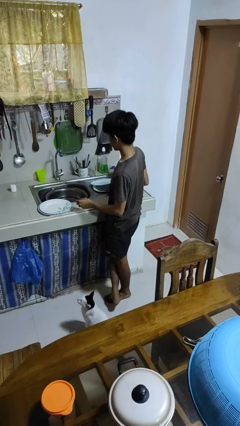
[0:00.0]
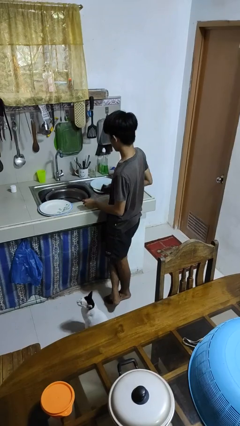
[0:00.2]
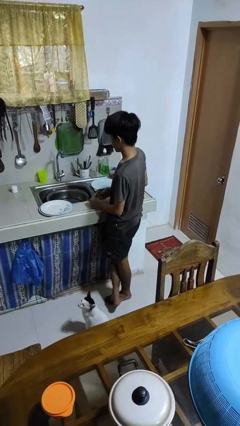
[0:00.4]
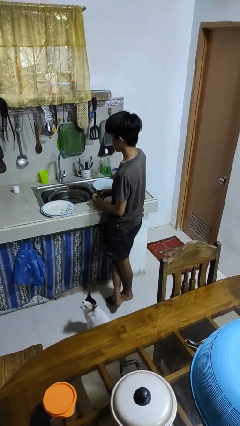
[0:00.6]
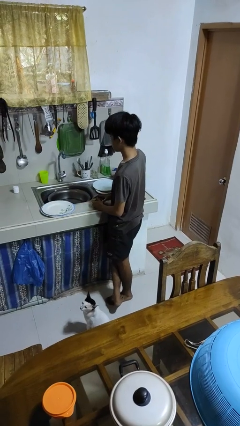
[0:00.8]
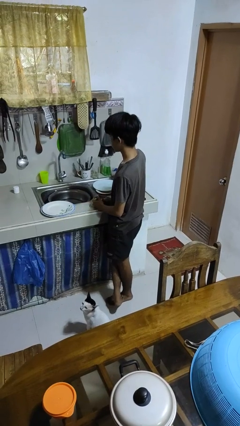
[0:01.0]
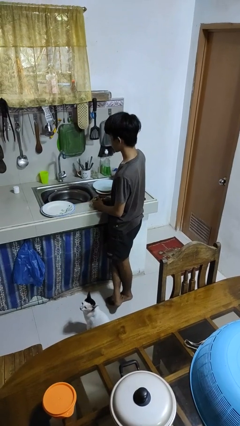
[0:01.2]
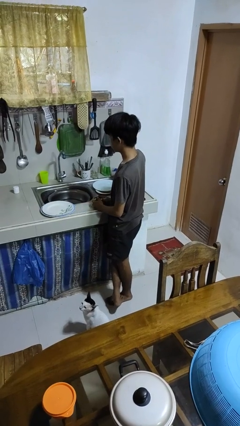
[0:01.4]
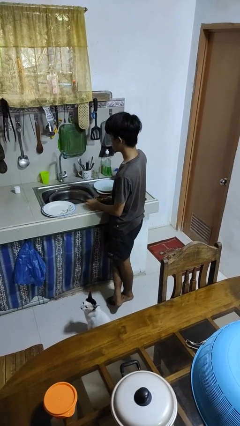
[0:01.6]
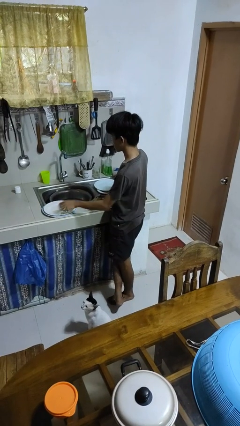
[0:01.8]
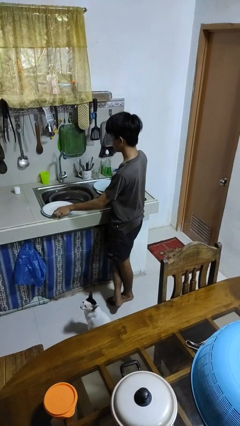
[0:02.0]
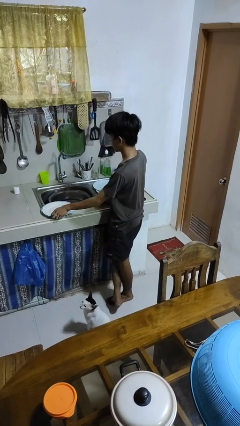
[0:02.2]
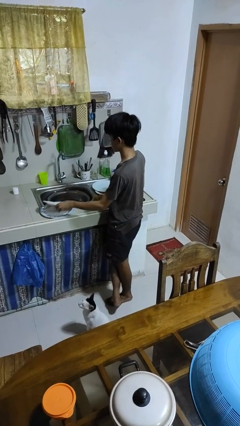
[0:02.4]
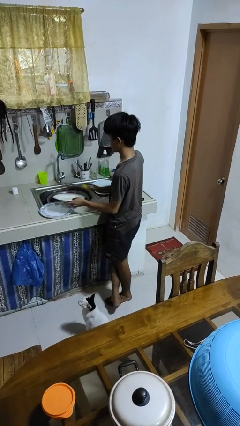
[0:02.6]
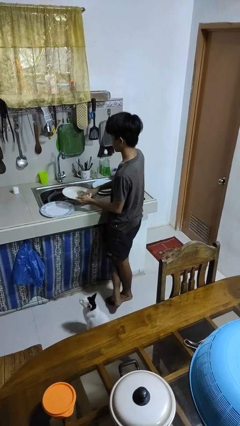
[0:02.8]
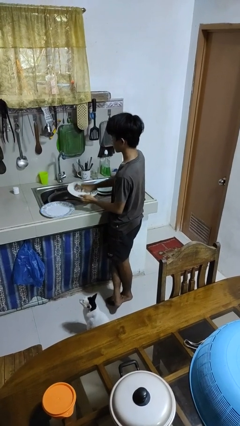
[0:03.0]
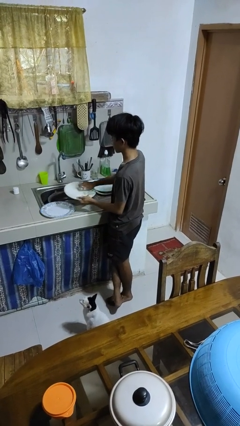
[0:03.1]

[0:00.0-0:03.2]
person dries hands with towel

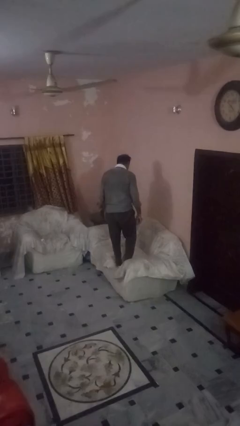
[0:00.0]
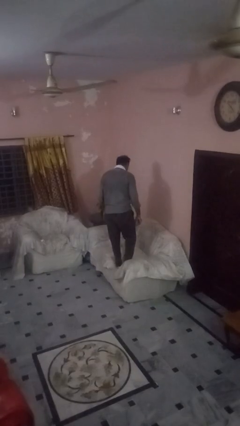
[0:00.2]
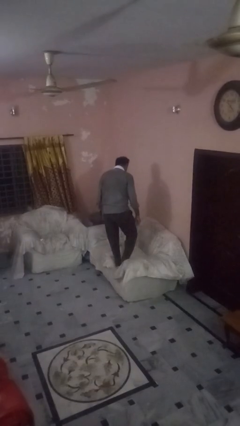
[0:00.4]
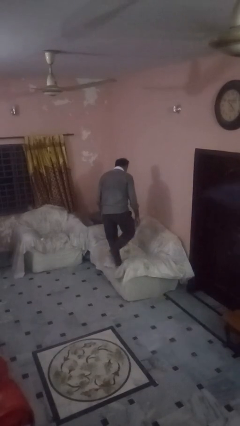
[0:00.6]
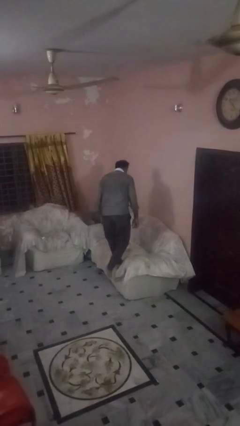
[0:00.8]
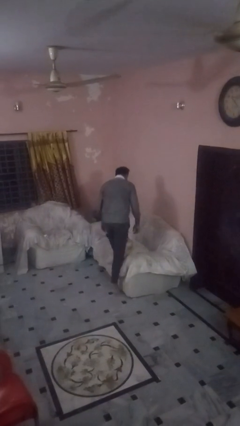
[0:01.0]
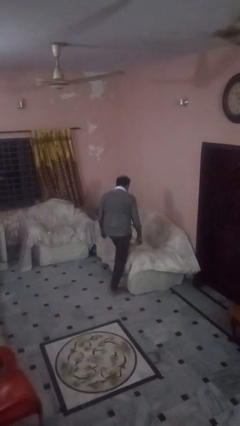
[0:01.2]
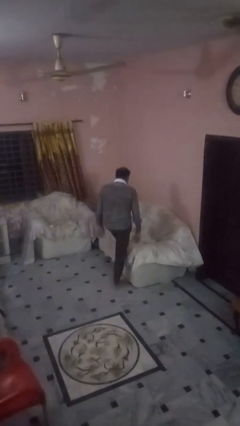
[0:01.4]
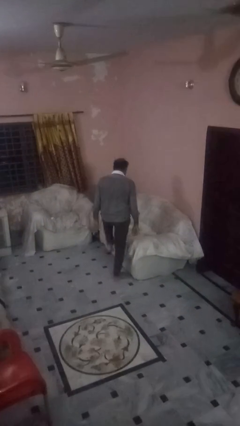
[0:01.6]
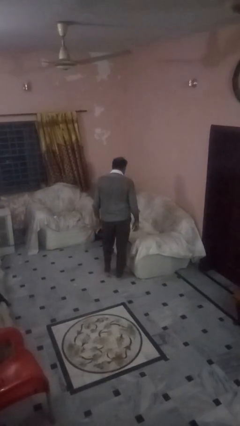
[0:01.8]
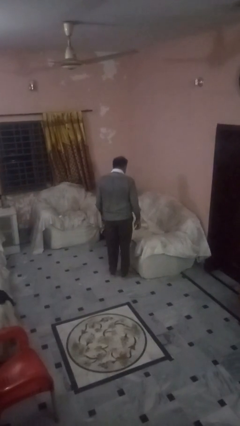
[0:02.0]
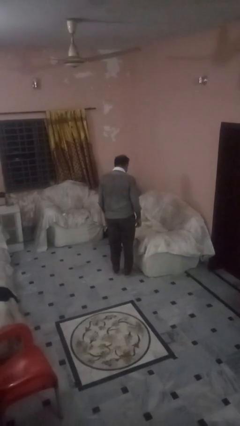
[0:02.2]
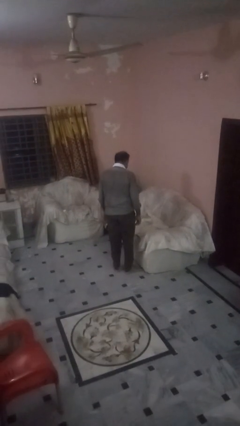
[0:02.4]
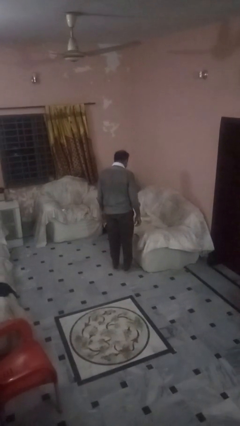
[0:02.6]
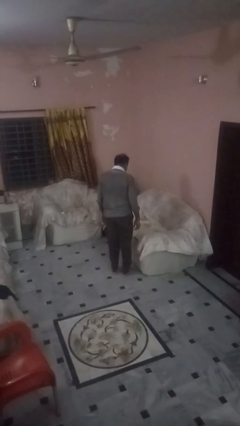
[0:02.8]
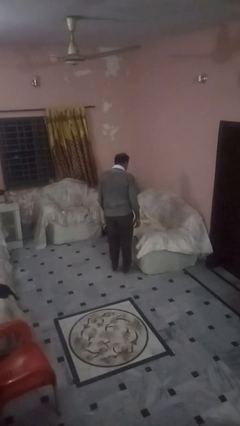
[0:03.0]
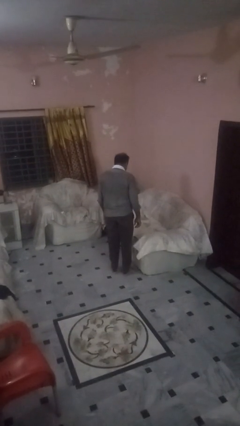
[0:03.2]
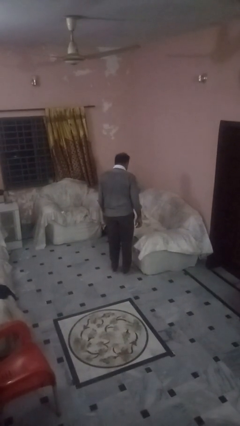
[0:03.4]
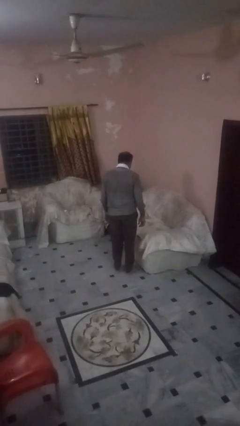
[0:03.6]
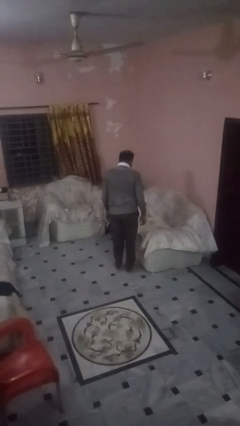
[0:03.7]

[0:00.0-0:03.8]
person climbs off couch

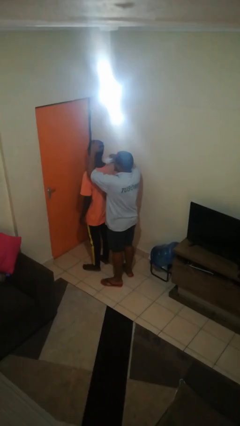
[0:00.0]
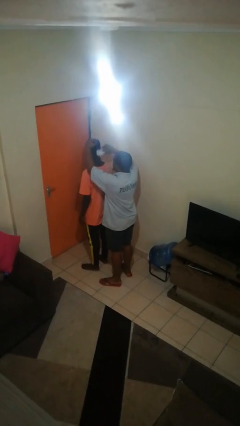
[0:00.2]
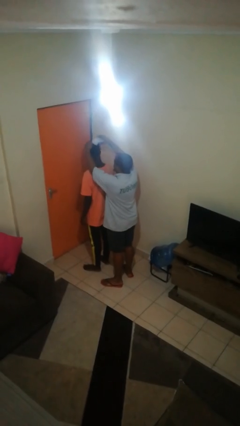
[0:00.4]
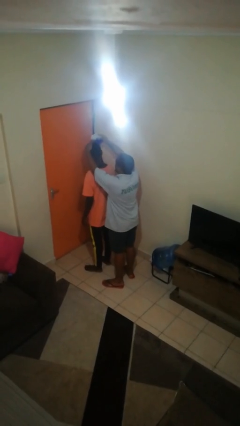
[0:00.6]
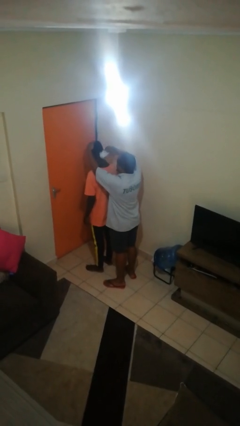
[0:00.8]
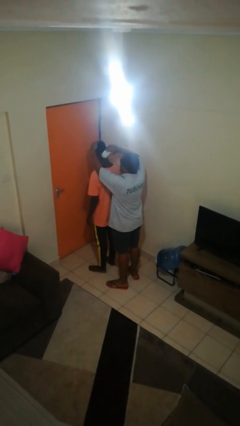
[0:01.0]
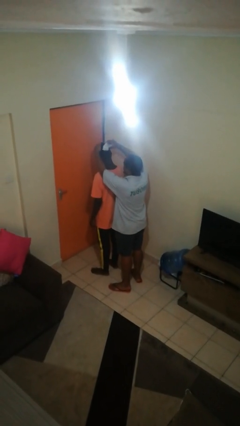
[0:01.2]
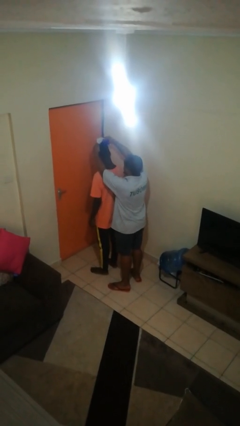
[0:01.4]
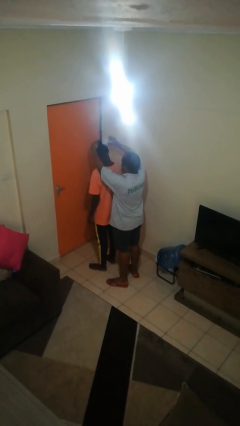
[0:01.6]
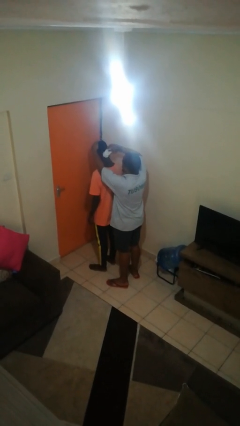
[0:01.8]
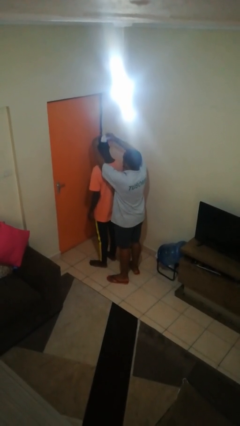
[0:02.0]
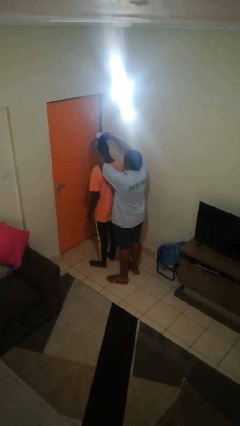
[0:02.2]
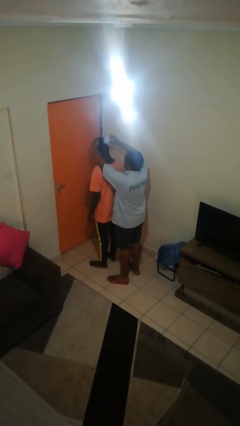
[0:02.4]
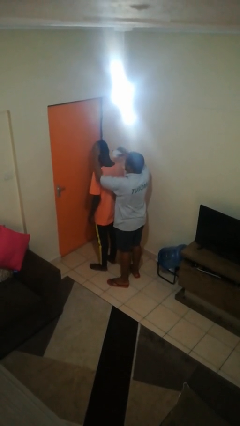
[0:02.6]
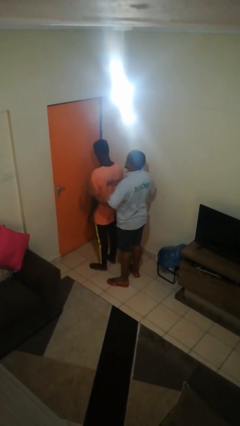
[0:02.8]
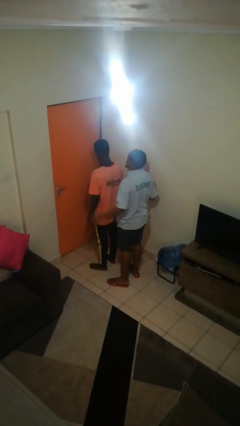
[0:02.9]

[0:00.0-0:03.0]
person brushes hair of person

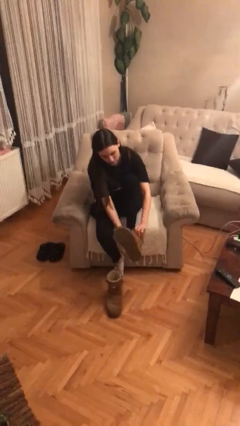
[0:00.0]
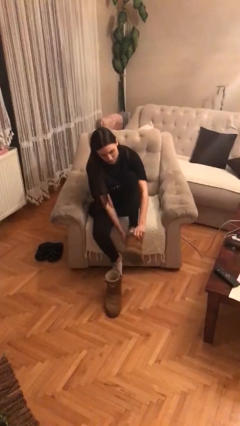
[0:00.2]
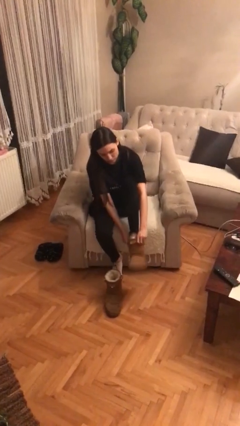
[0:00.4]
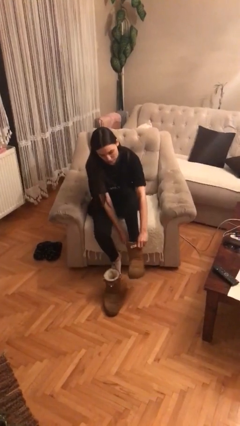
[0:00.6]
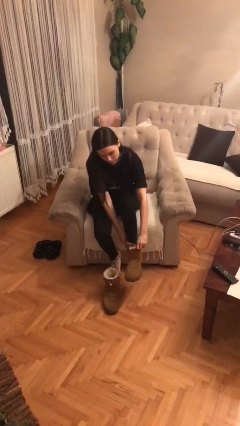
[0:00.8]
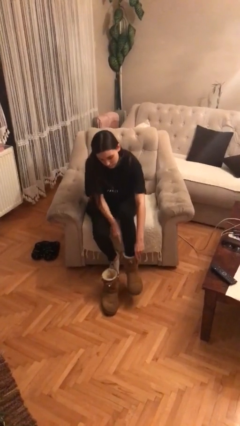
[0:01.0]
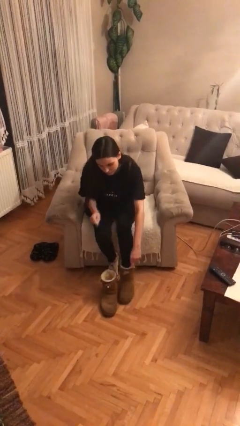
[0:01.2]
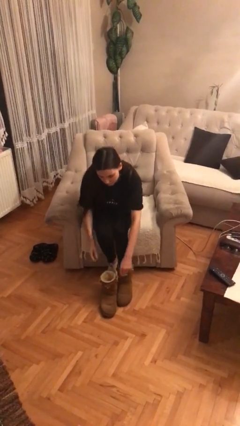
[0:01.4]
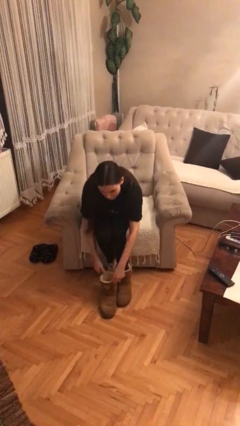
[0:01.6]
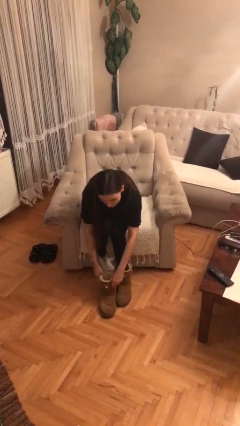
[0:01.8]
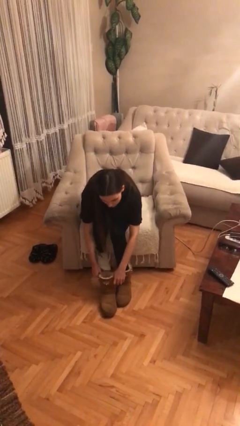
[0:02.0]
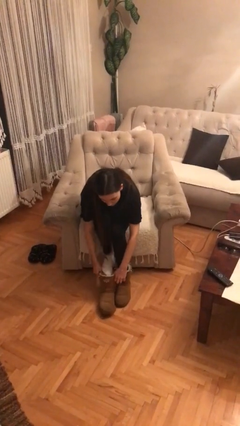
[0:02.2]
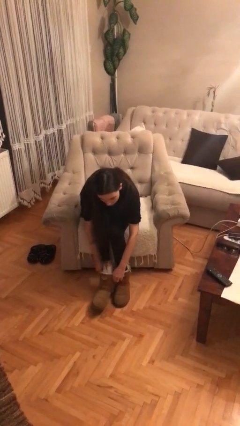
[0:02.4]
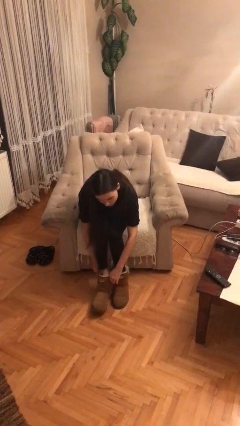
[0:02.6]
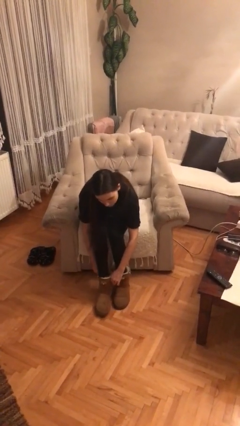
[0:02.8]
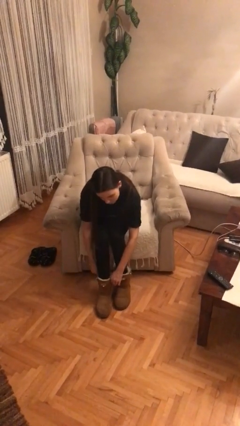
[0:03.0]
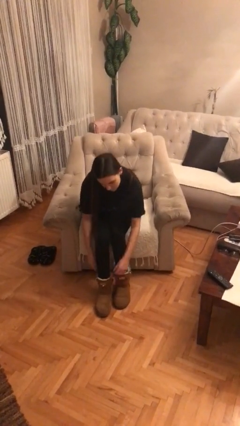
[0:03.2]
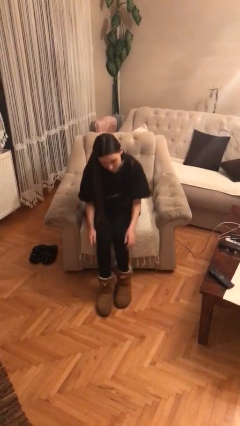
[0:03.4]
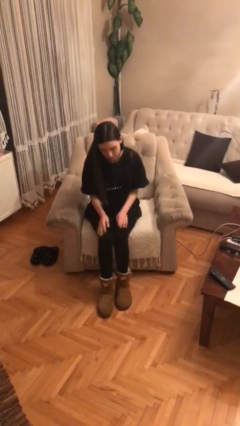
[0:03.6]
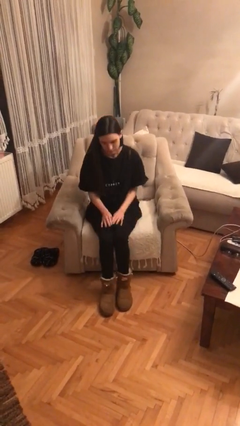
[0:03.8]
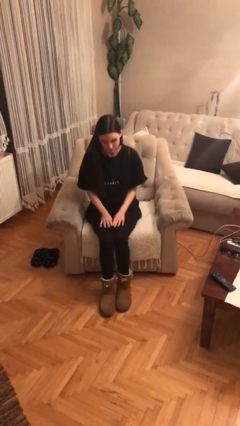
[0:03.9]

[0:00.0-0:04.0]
person puts on shoes

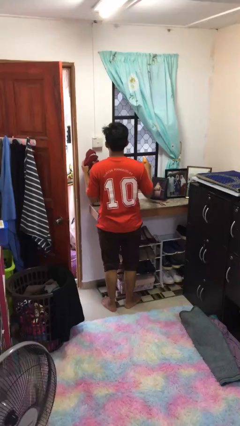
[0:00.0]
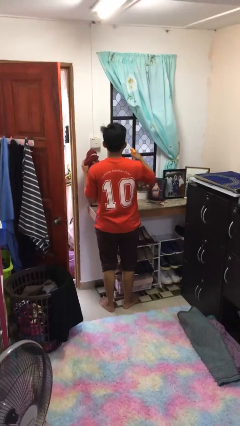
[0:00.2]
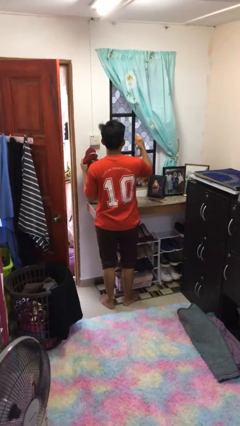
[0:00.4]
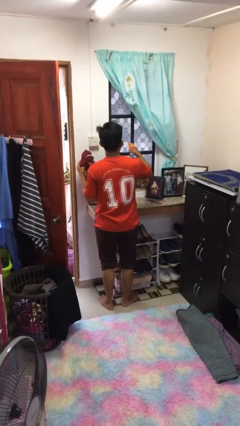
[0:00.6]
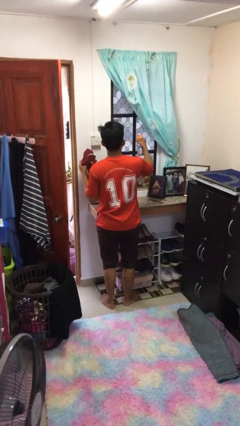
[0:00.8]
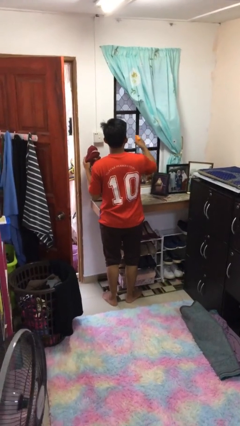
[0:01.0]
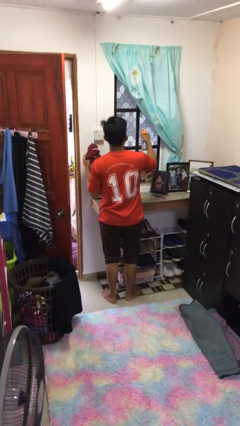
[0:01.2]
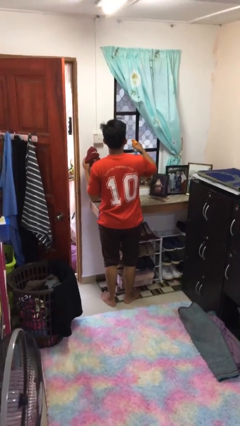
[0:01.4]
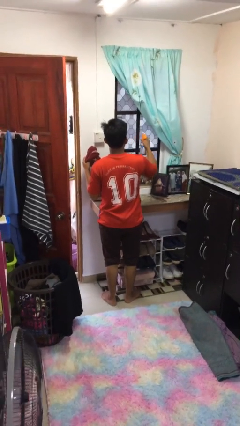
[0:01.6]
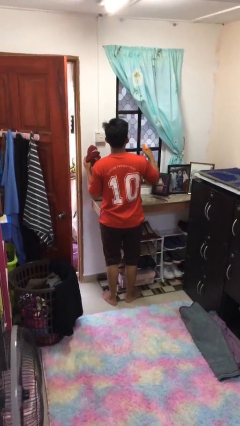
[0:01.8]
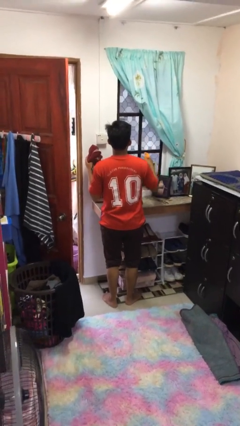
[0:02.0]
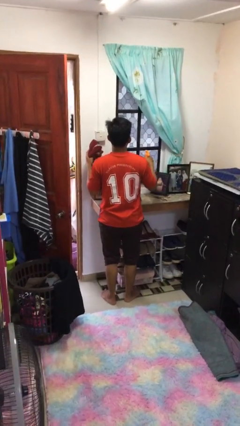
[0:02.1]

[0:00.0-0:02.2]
person sprays from bottle

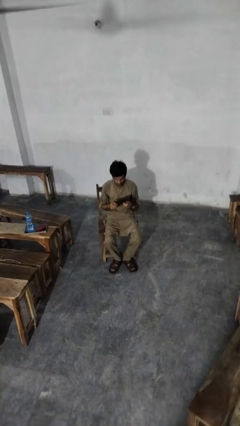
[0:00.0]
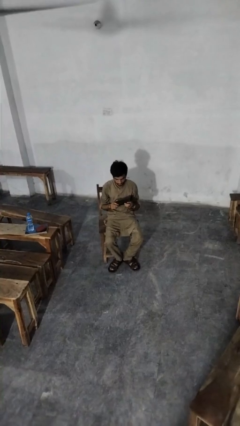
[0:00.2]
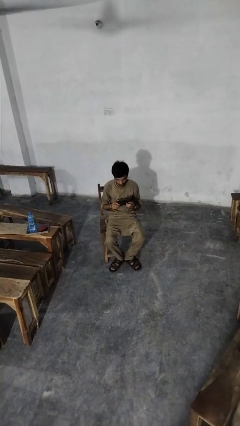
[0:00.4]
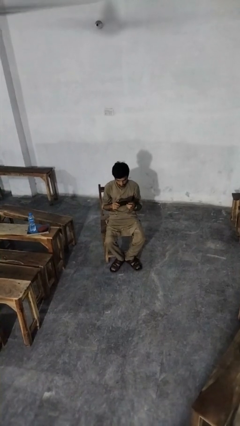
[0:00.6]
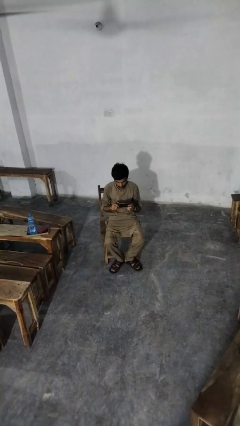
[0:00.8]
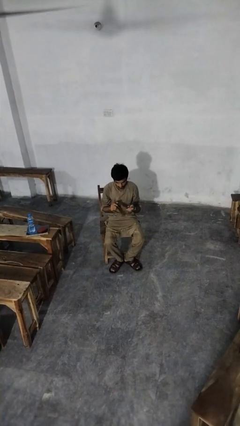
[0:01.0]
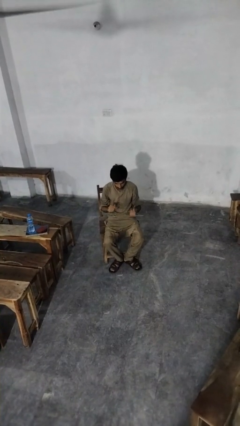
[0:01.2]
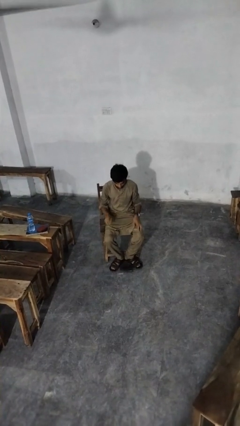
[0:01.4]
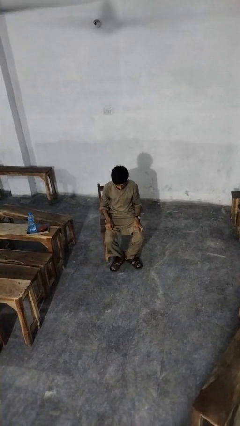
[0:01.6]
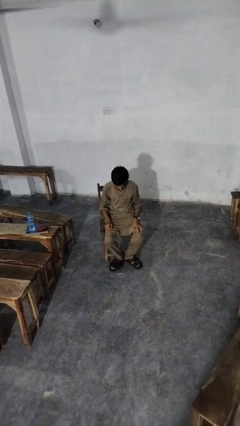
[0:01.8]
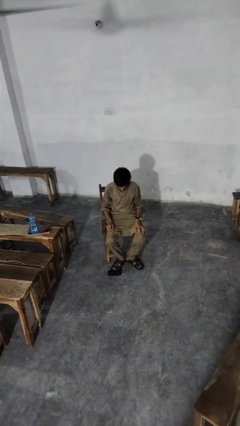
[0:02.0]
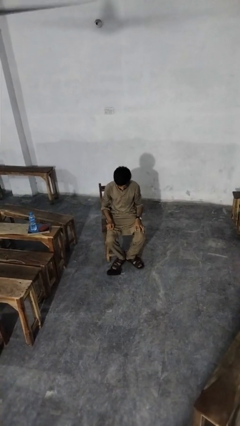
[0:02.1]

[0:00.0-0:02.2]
person drops object
